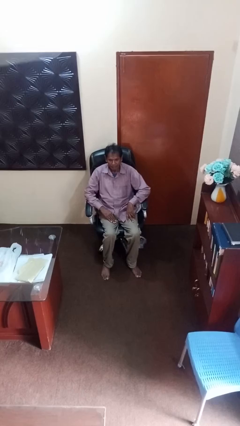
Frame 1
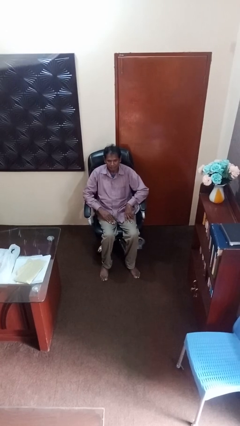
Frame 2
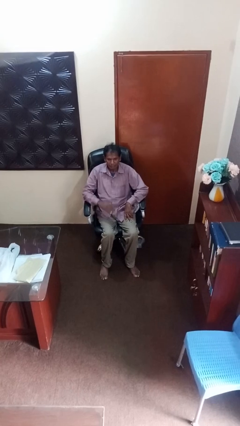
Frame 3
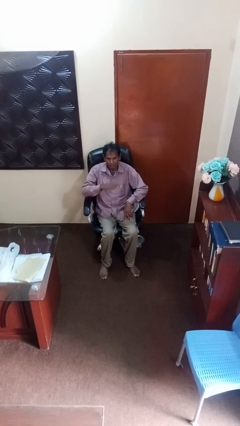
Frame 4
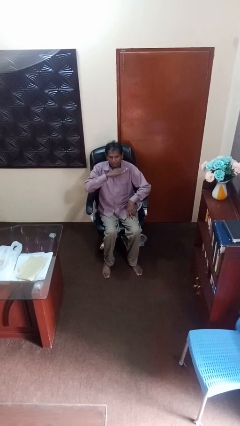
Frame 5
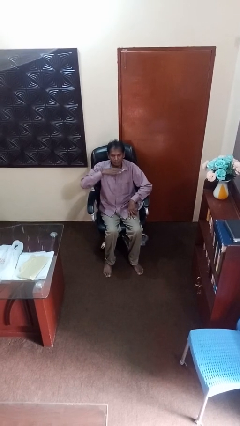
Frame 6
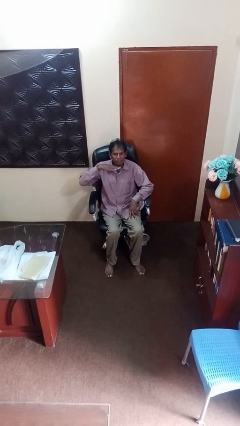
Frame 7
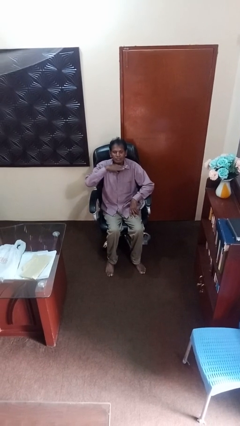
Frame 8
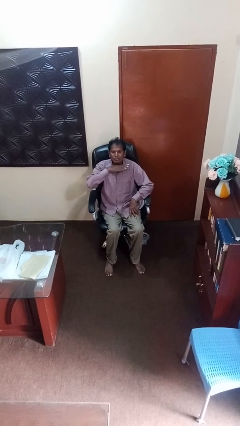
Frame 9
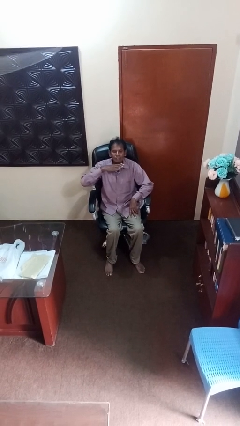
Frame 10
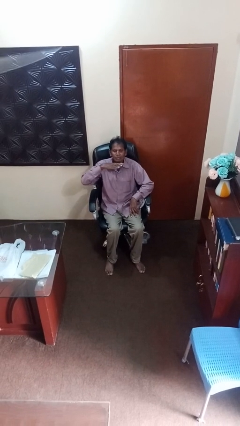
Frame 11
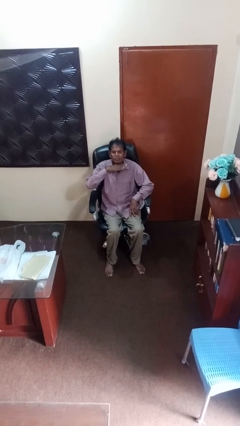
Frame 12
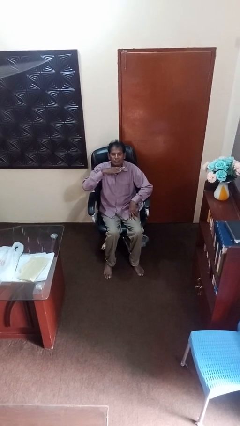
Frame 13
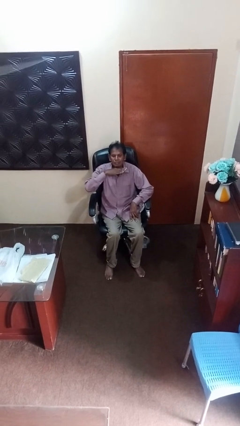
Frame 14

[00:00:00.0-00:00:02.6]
person gestures cut

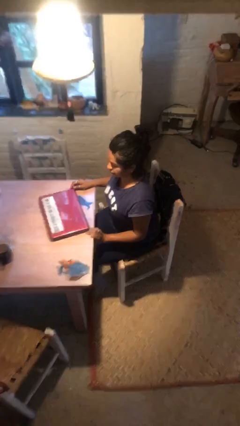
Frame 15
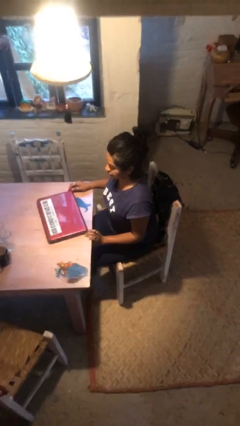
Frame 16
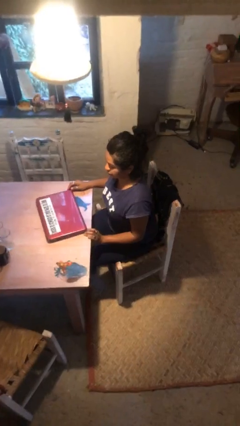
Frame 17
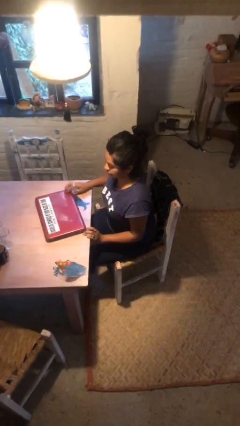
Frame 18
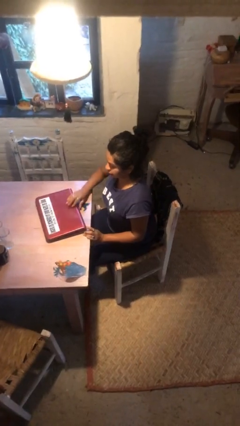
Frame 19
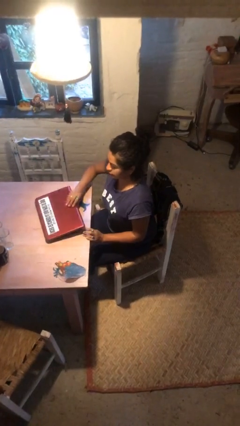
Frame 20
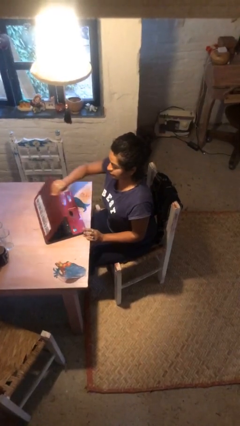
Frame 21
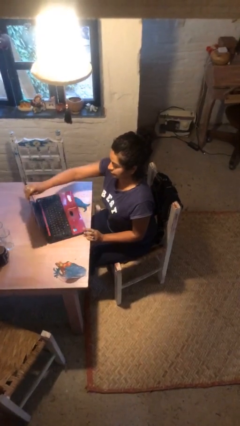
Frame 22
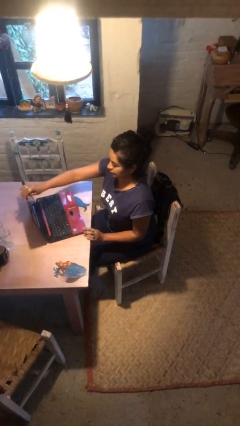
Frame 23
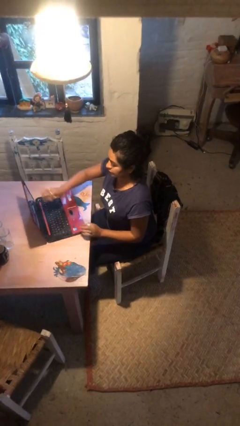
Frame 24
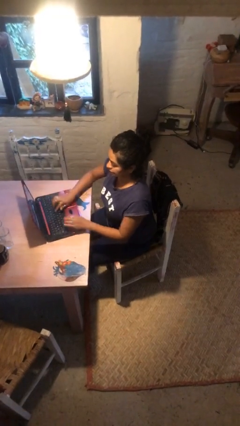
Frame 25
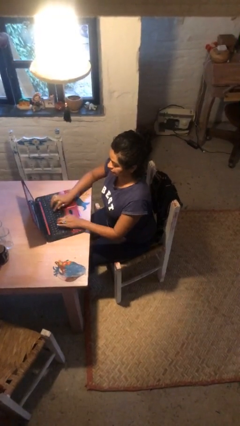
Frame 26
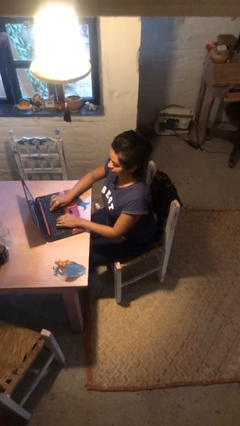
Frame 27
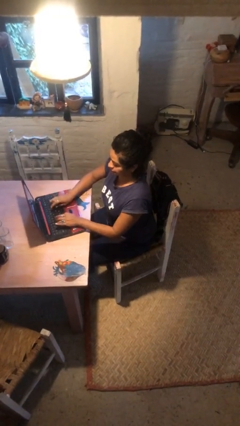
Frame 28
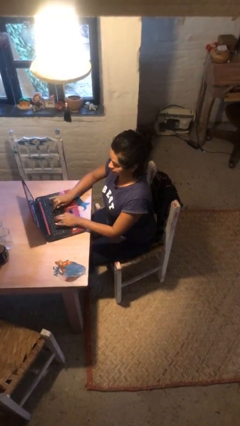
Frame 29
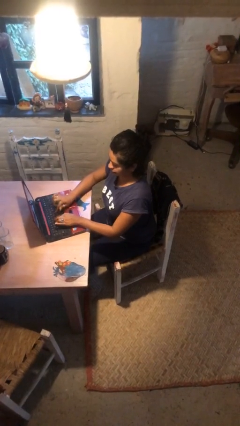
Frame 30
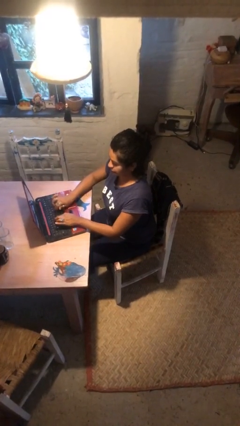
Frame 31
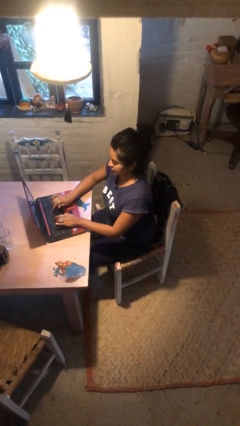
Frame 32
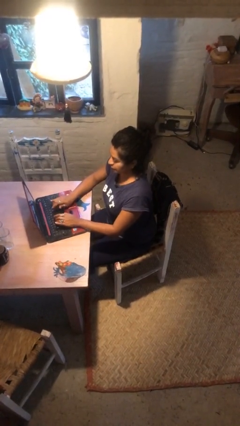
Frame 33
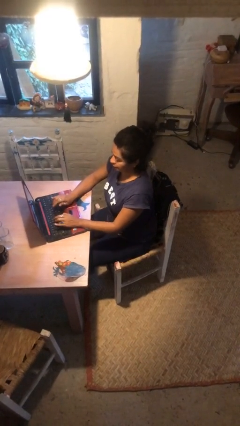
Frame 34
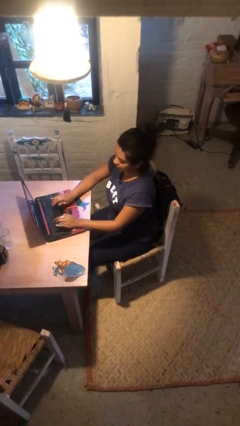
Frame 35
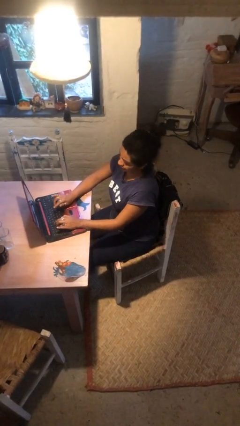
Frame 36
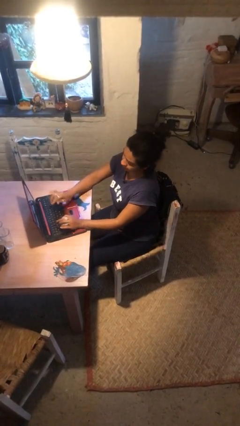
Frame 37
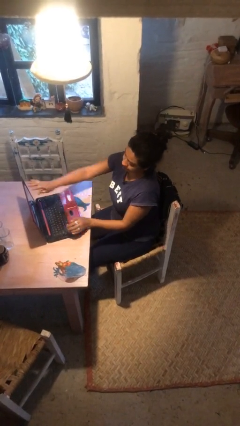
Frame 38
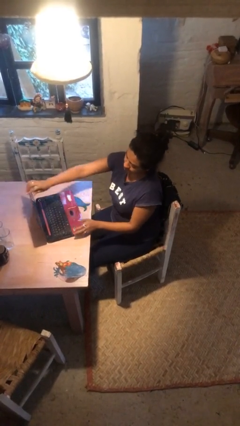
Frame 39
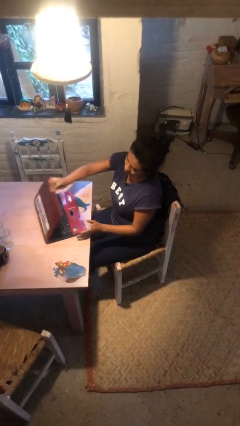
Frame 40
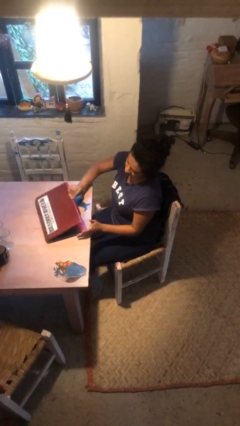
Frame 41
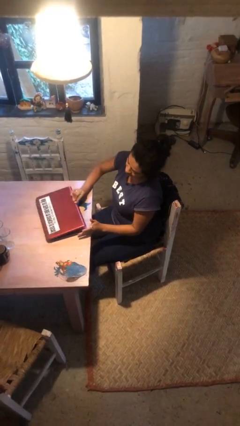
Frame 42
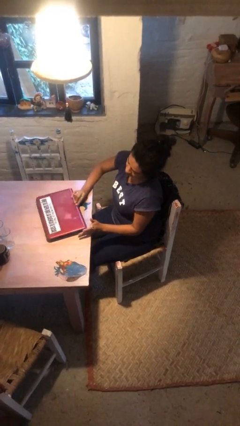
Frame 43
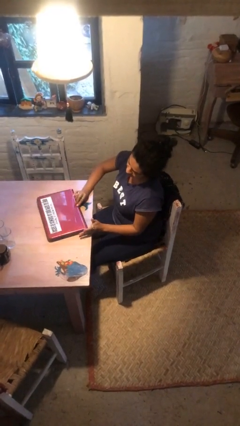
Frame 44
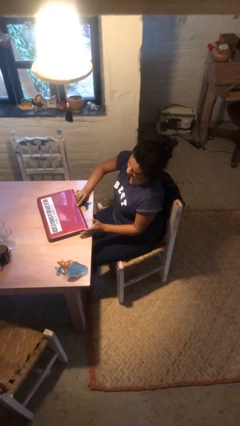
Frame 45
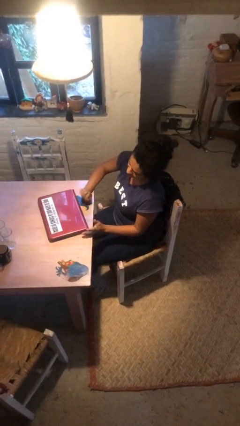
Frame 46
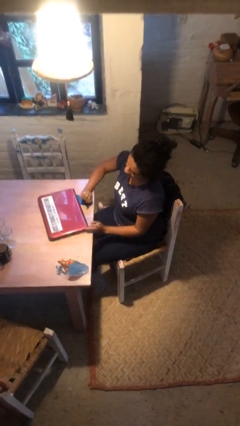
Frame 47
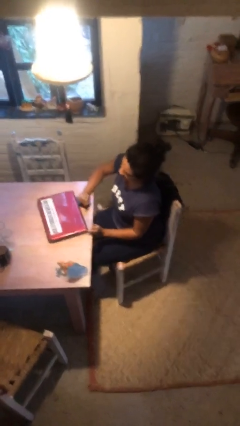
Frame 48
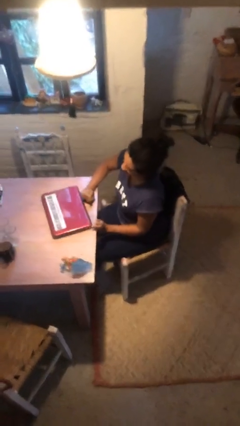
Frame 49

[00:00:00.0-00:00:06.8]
person interacts with laptop

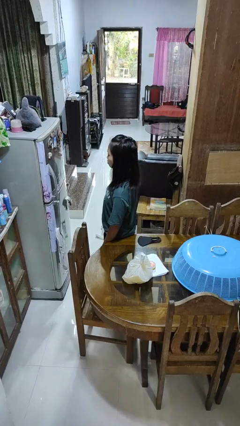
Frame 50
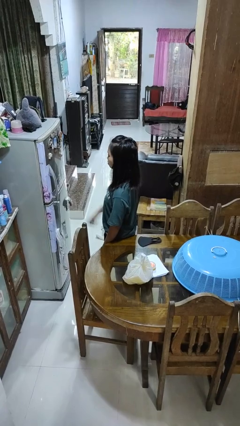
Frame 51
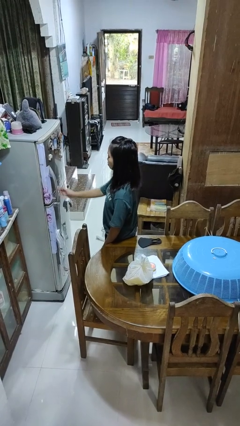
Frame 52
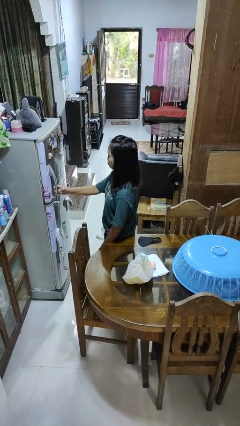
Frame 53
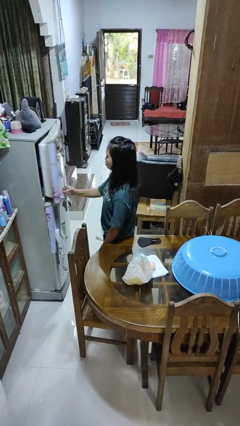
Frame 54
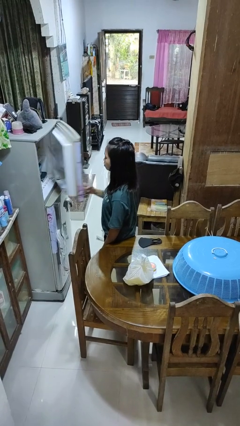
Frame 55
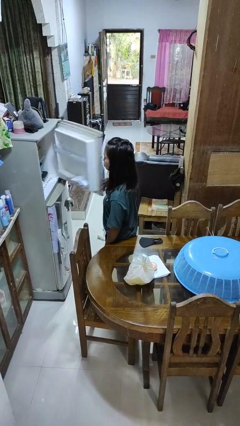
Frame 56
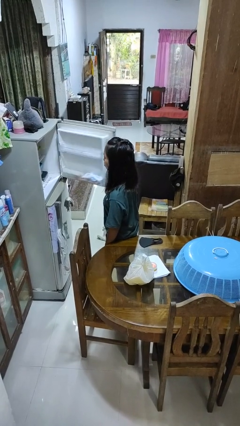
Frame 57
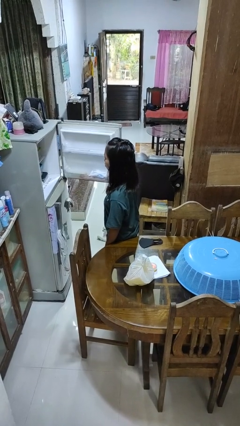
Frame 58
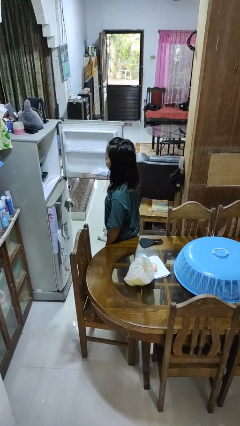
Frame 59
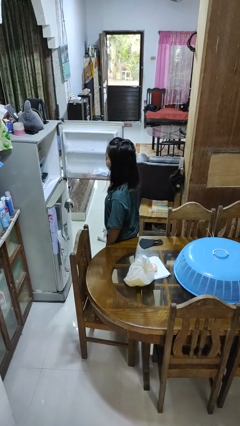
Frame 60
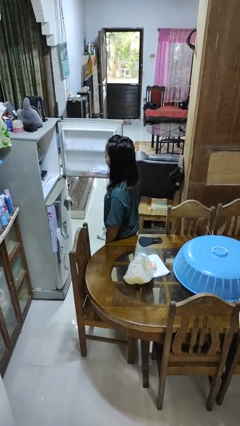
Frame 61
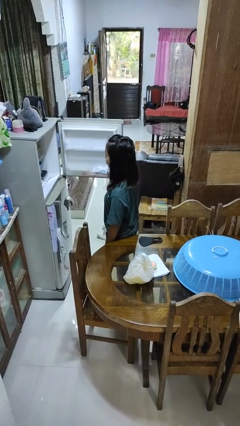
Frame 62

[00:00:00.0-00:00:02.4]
person opens refrigerator

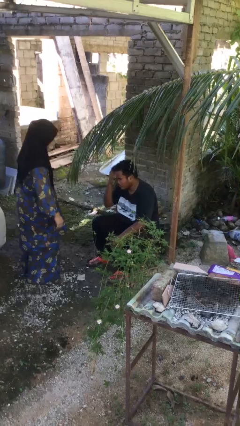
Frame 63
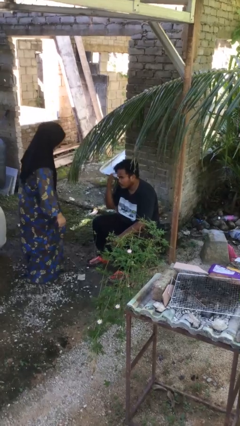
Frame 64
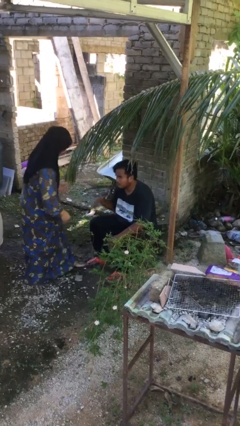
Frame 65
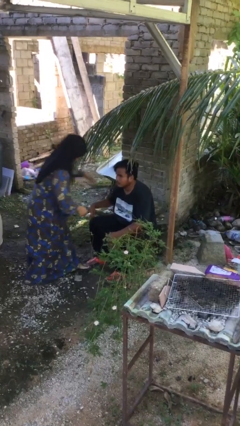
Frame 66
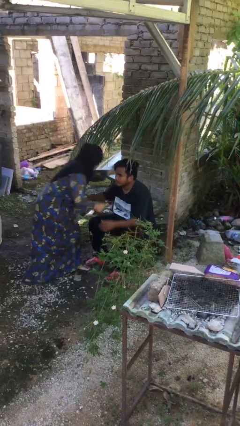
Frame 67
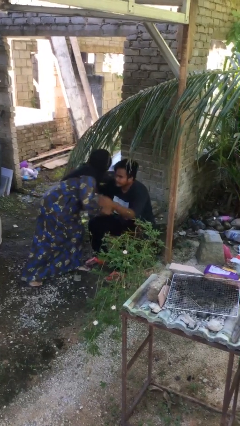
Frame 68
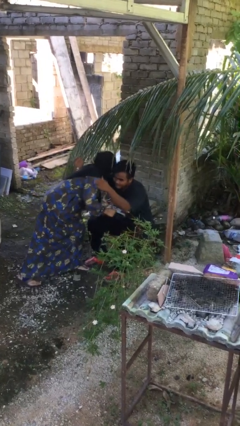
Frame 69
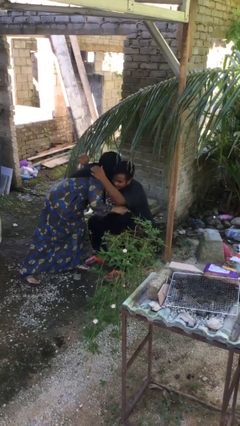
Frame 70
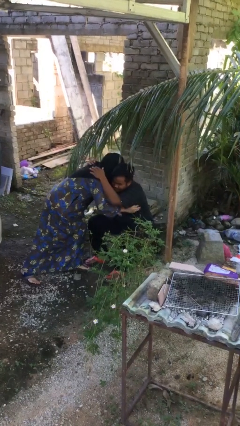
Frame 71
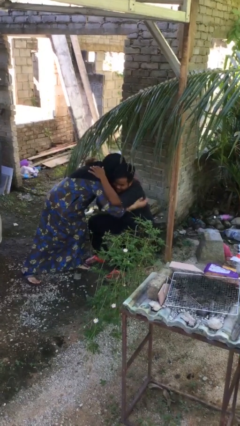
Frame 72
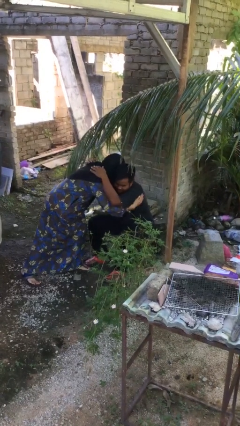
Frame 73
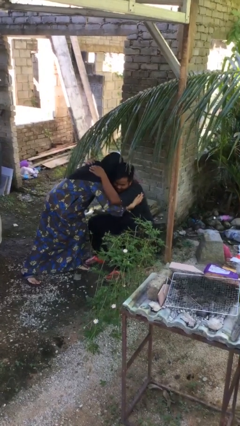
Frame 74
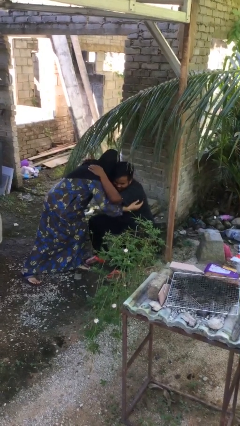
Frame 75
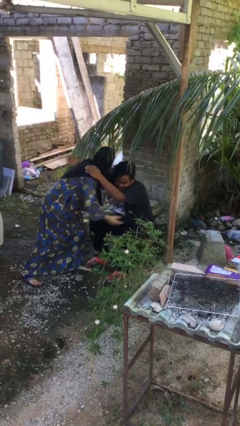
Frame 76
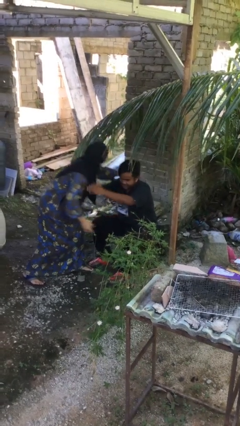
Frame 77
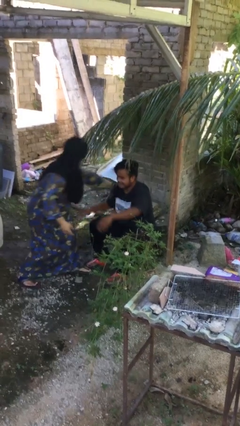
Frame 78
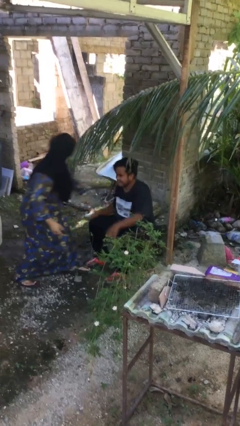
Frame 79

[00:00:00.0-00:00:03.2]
person embraces person

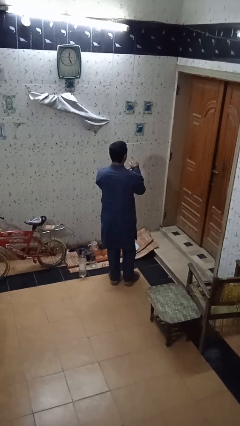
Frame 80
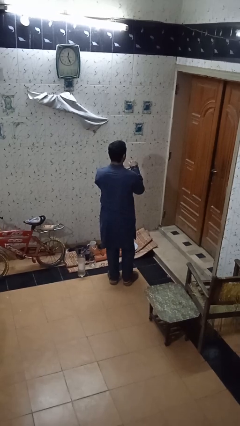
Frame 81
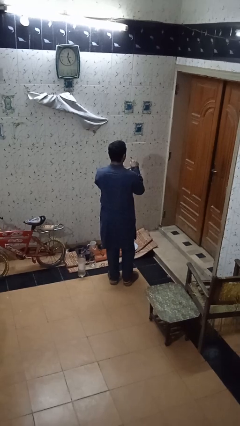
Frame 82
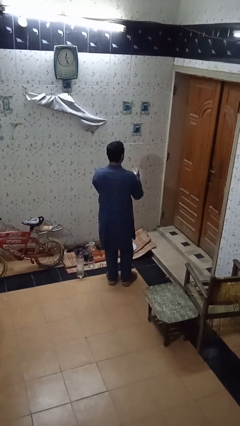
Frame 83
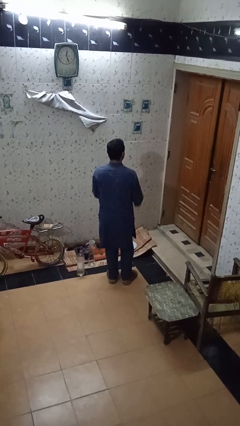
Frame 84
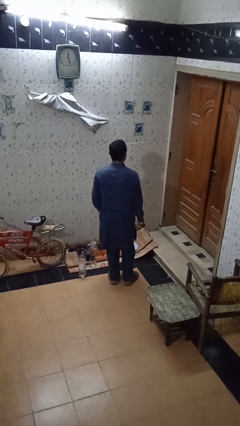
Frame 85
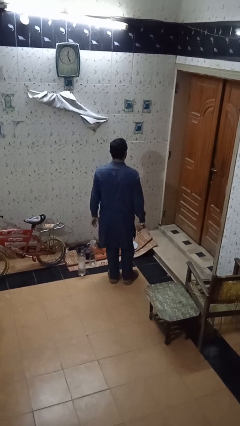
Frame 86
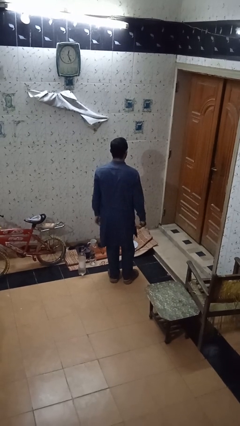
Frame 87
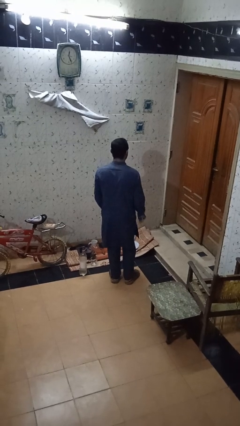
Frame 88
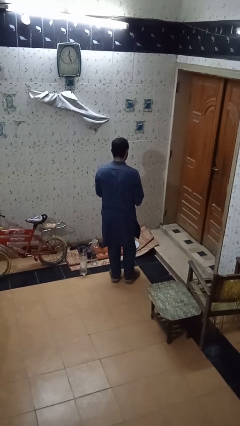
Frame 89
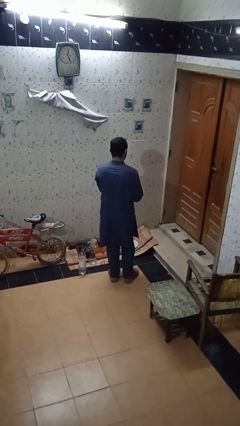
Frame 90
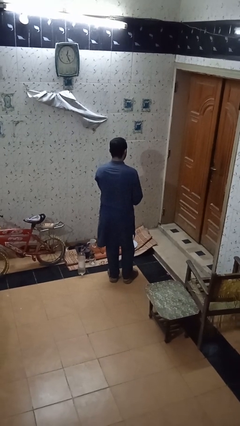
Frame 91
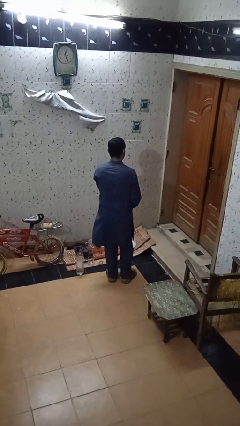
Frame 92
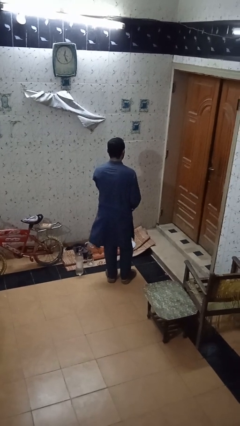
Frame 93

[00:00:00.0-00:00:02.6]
person takes off wristwatch
